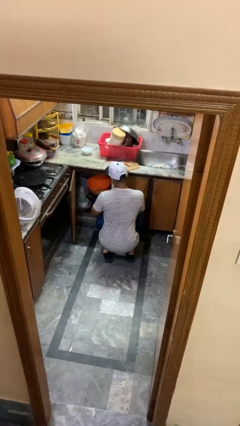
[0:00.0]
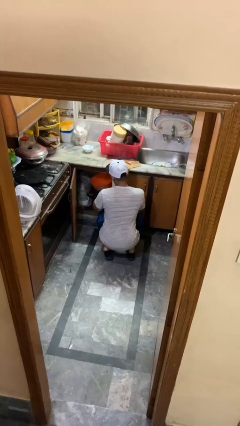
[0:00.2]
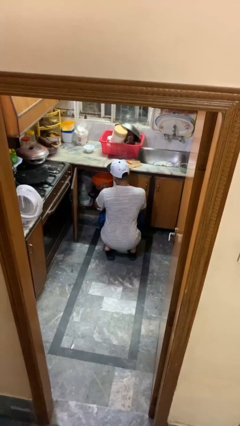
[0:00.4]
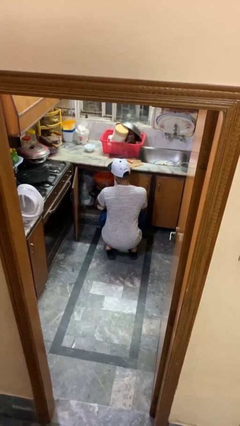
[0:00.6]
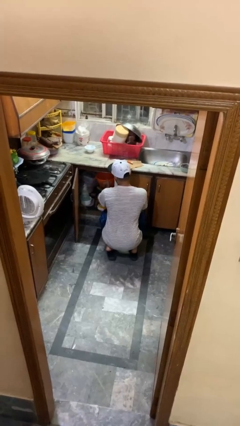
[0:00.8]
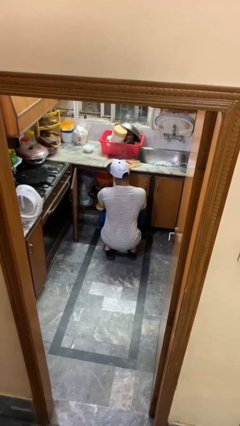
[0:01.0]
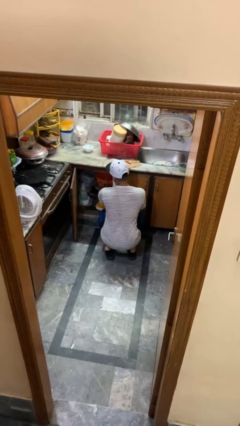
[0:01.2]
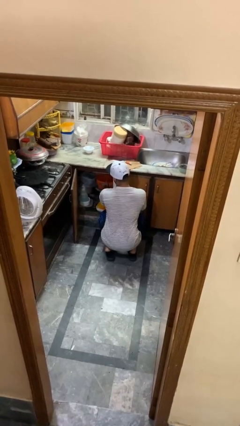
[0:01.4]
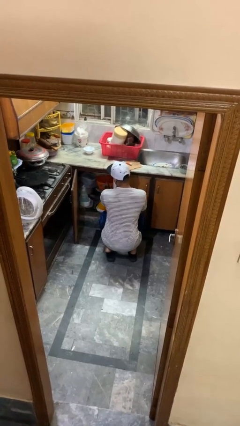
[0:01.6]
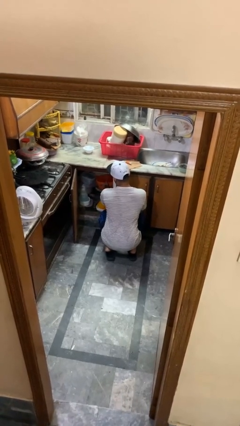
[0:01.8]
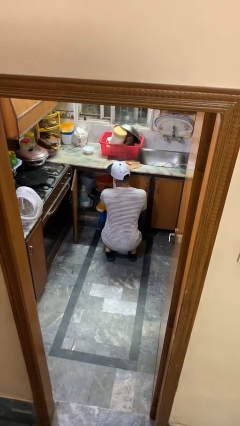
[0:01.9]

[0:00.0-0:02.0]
person puts object into kitchen drawer

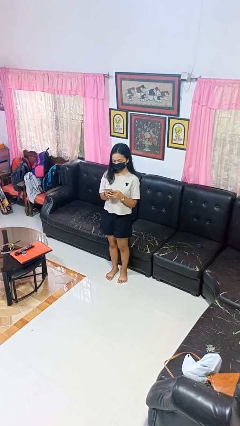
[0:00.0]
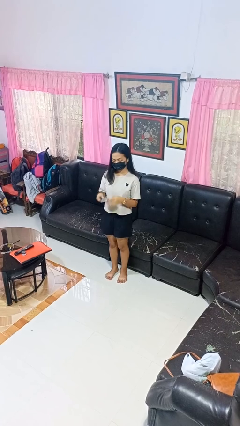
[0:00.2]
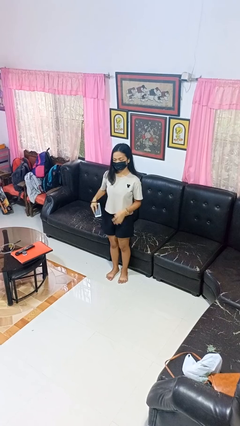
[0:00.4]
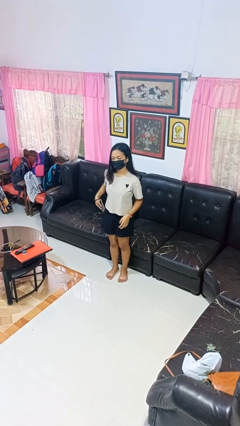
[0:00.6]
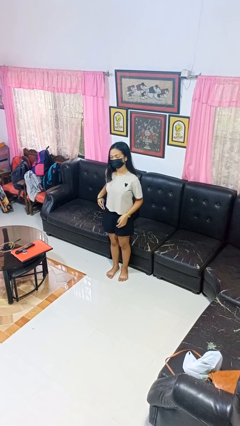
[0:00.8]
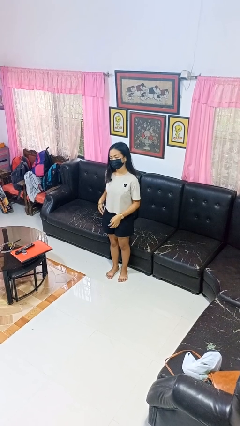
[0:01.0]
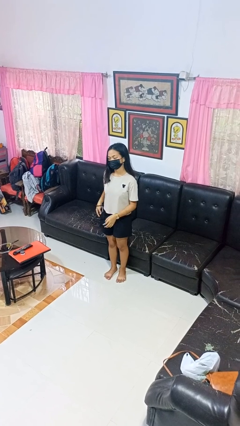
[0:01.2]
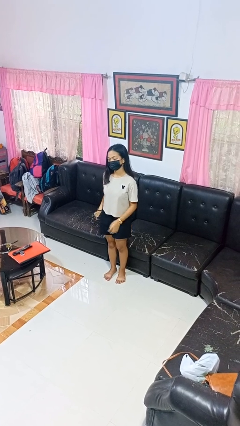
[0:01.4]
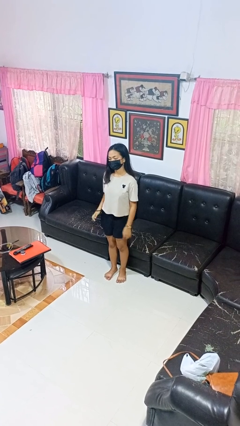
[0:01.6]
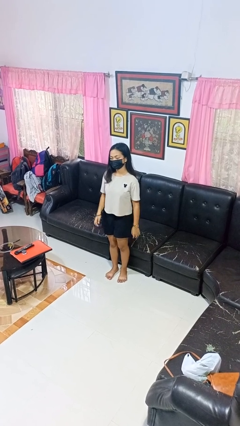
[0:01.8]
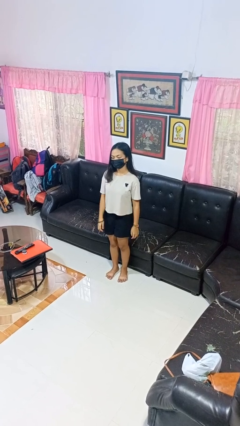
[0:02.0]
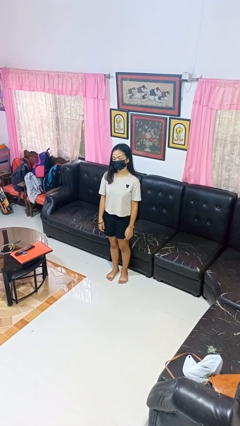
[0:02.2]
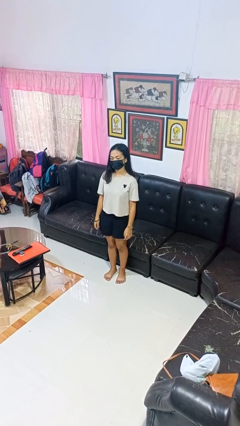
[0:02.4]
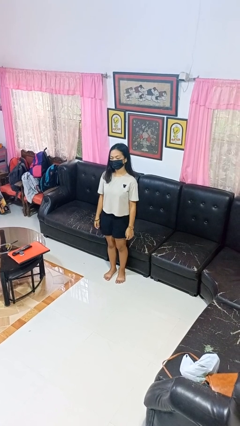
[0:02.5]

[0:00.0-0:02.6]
person puts phone into pocket

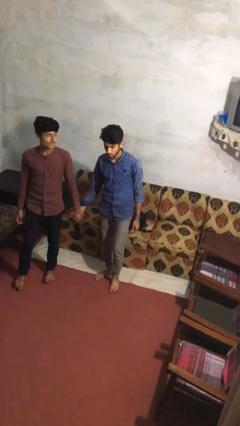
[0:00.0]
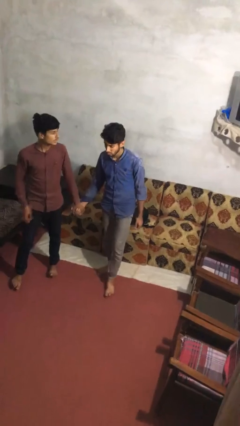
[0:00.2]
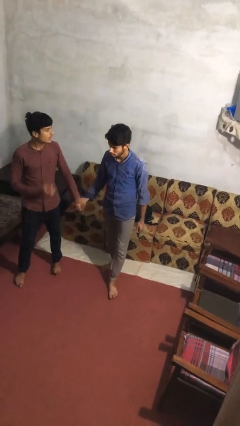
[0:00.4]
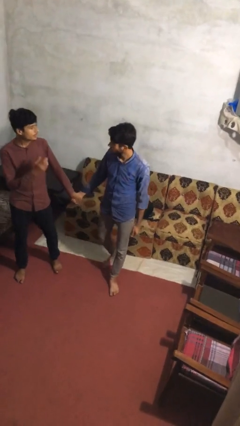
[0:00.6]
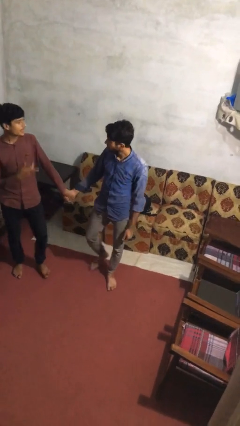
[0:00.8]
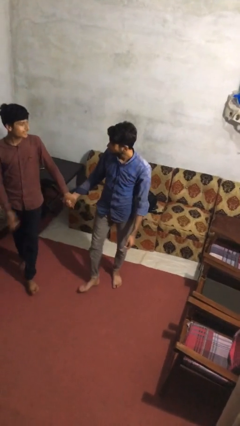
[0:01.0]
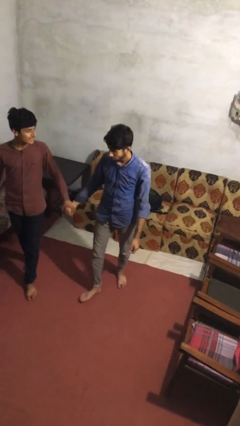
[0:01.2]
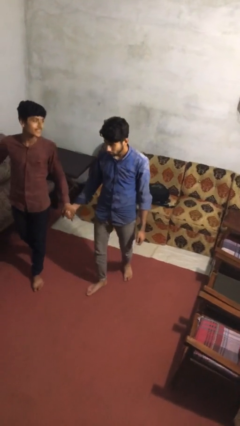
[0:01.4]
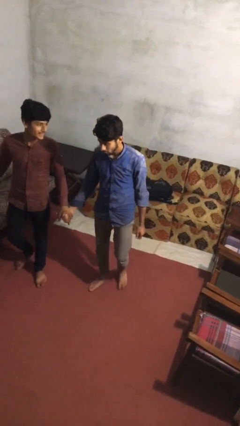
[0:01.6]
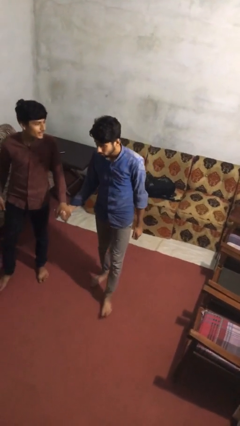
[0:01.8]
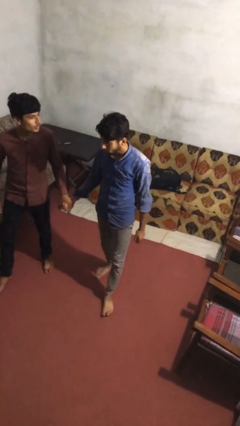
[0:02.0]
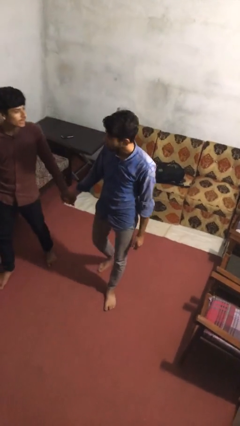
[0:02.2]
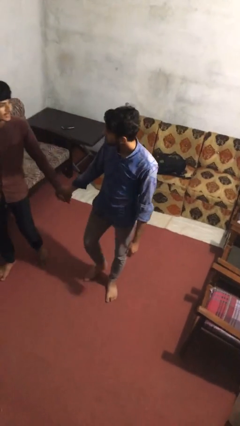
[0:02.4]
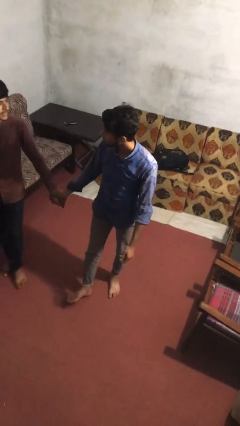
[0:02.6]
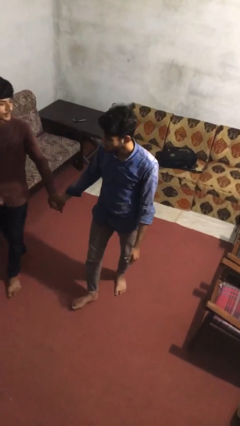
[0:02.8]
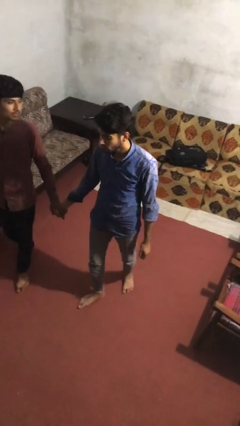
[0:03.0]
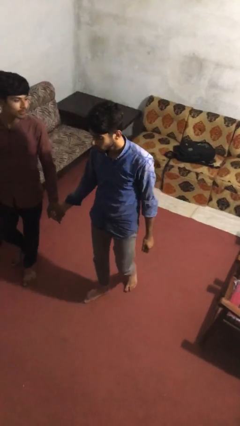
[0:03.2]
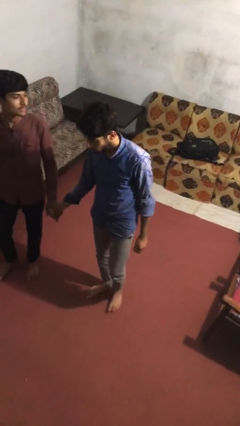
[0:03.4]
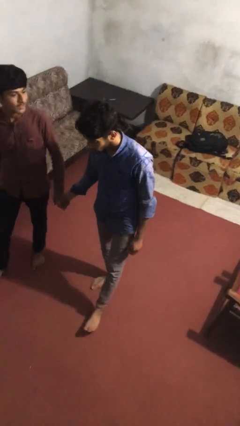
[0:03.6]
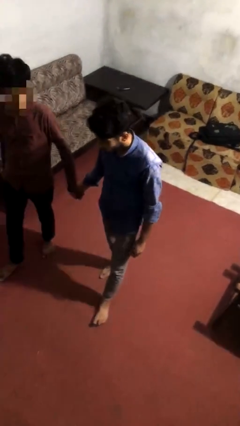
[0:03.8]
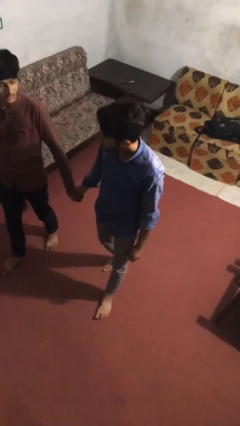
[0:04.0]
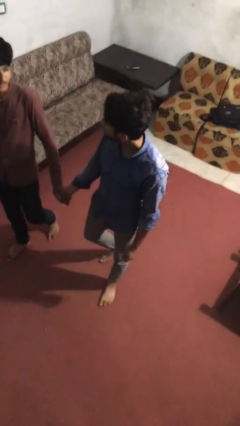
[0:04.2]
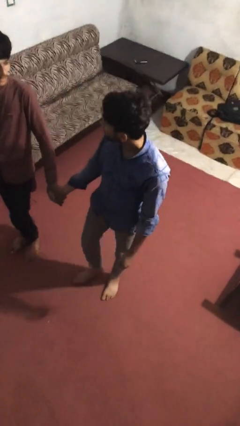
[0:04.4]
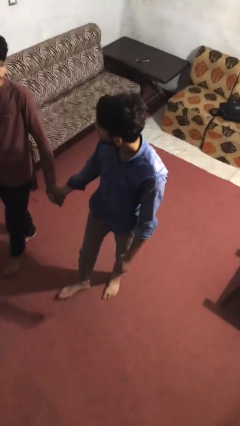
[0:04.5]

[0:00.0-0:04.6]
person holds hand

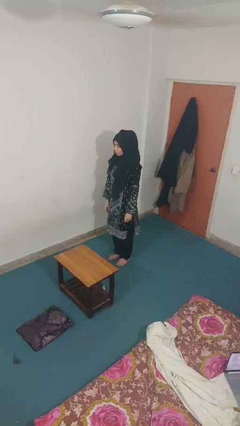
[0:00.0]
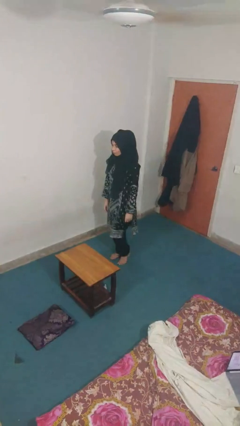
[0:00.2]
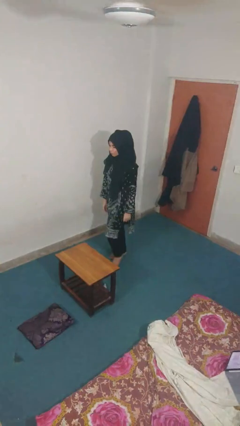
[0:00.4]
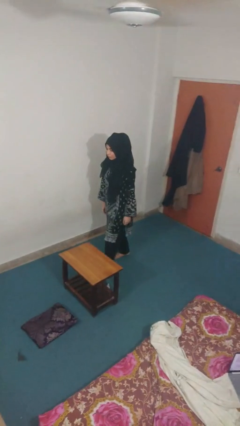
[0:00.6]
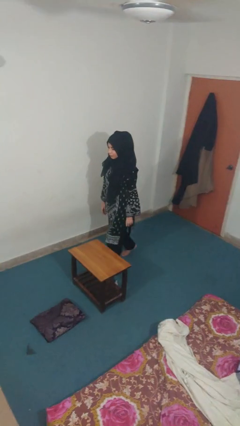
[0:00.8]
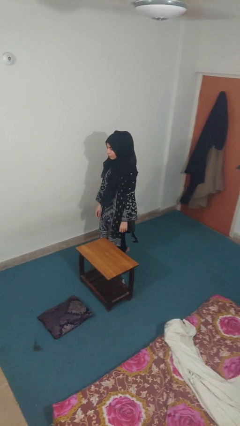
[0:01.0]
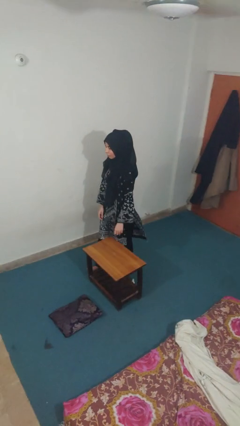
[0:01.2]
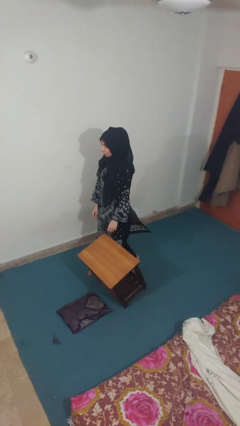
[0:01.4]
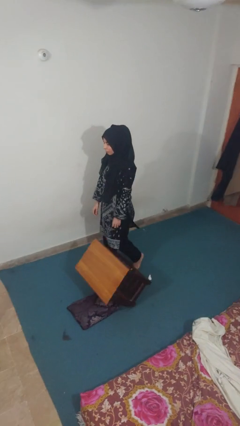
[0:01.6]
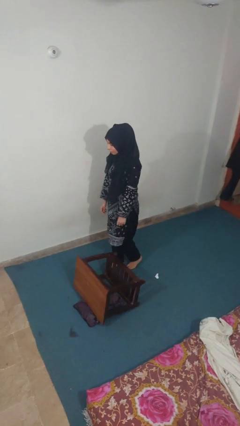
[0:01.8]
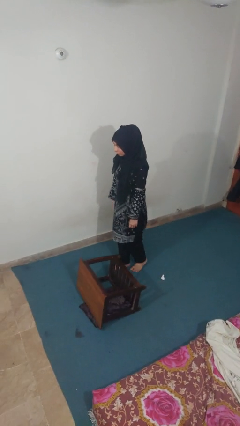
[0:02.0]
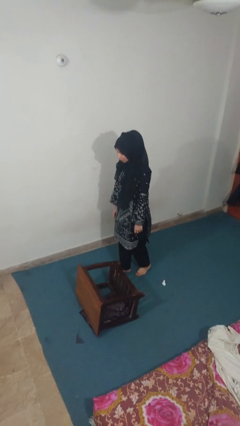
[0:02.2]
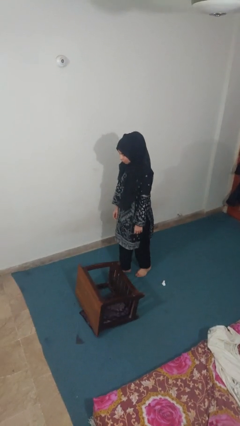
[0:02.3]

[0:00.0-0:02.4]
person knocks over furniture

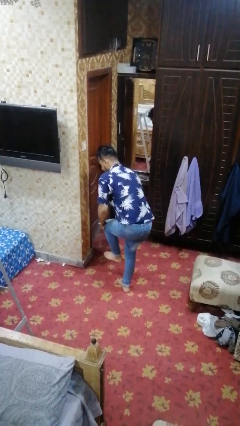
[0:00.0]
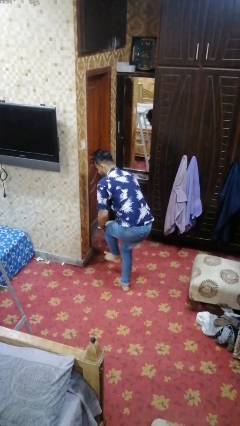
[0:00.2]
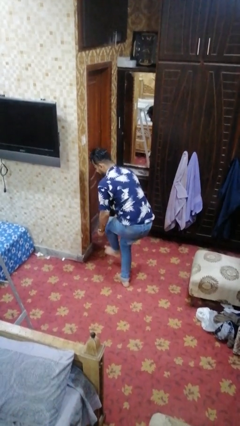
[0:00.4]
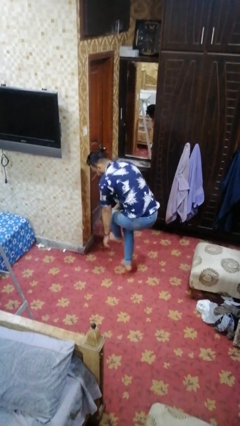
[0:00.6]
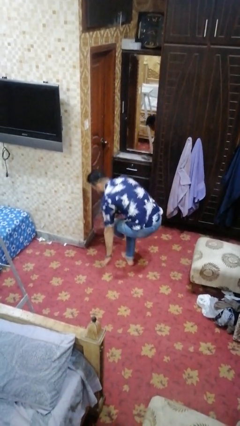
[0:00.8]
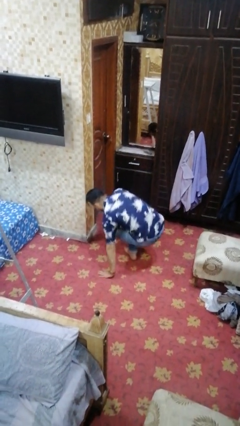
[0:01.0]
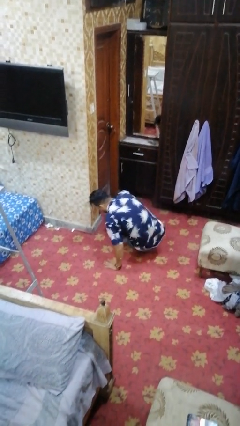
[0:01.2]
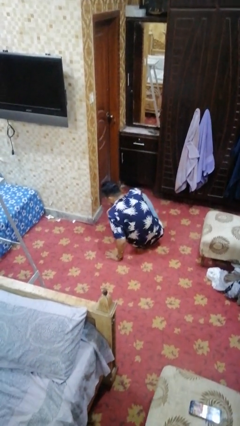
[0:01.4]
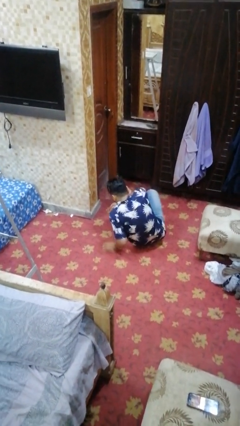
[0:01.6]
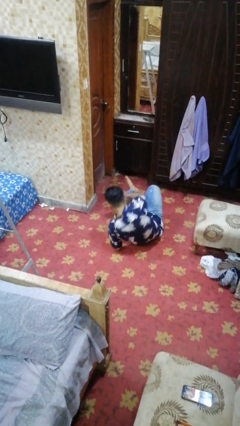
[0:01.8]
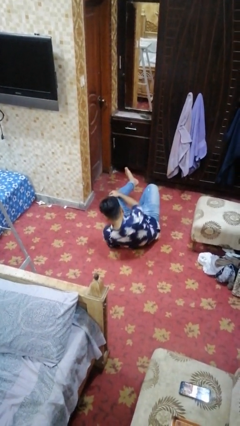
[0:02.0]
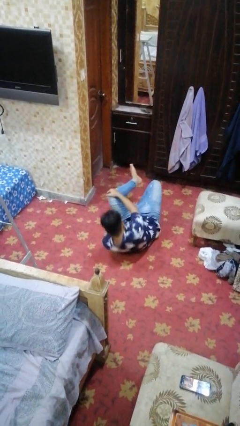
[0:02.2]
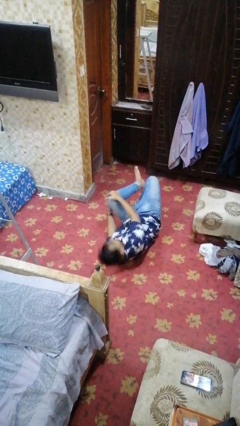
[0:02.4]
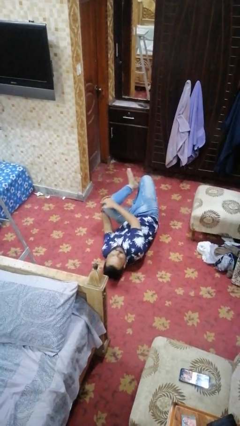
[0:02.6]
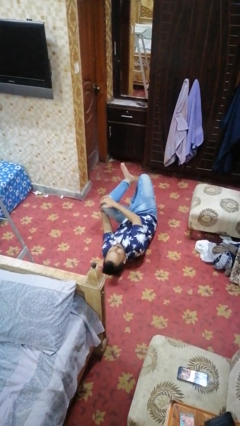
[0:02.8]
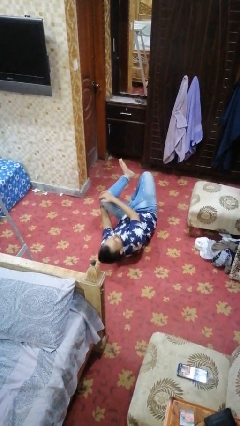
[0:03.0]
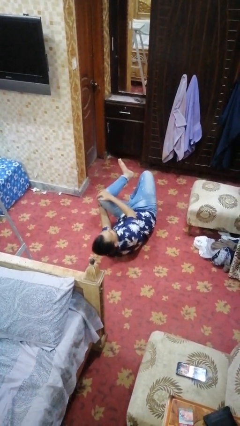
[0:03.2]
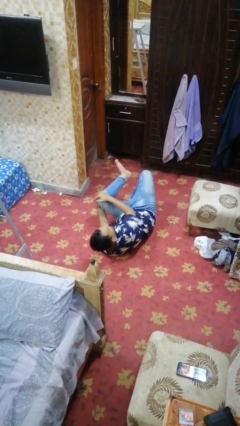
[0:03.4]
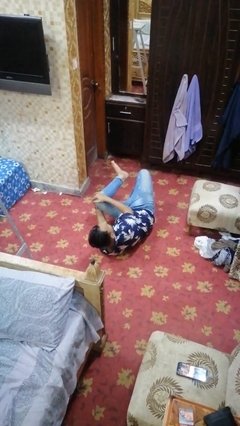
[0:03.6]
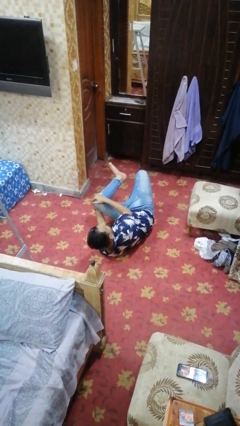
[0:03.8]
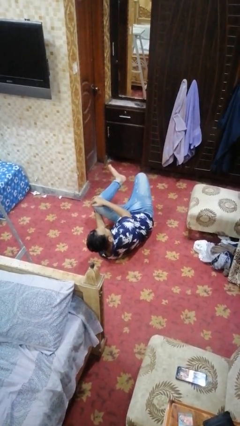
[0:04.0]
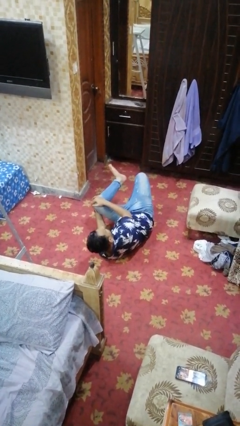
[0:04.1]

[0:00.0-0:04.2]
person lies down on floor

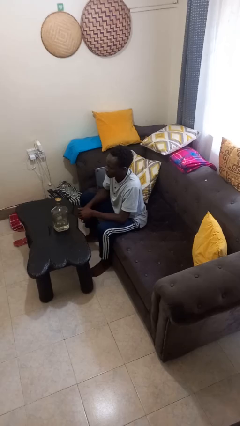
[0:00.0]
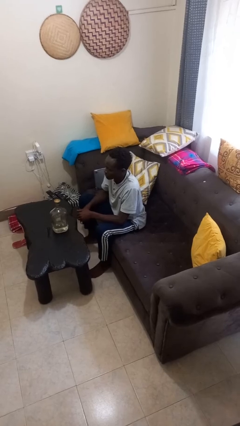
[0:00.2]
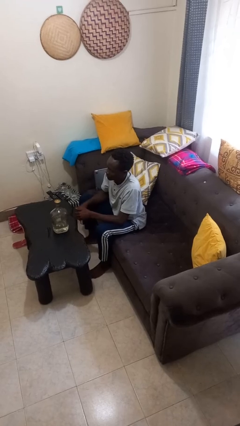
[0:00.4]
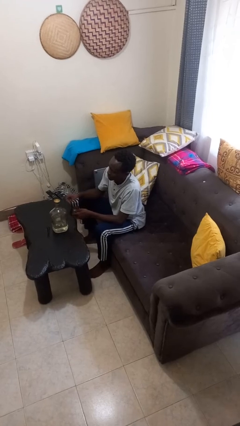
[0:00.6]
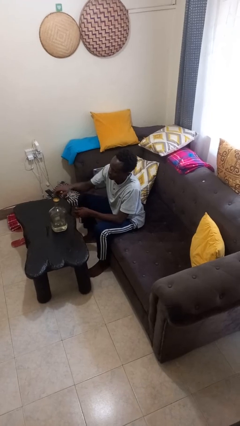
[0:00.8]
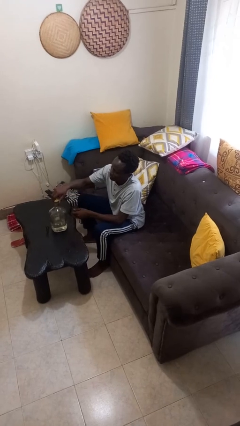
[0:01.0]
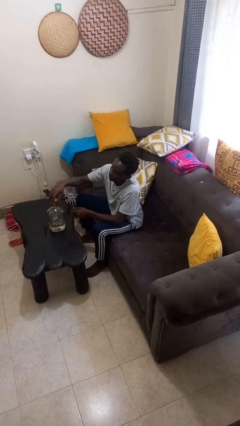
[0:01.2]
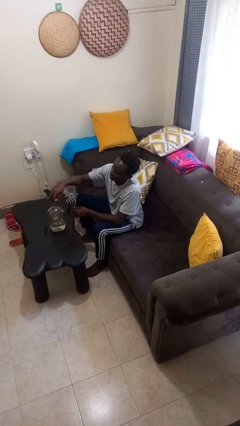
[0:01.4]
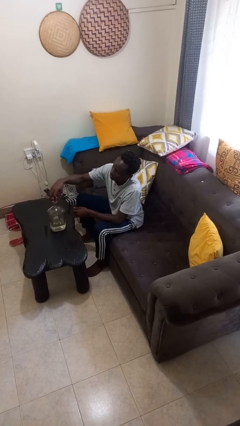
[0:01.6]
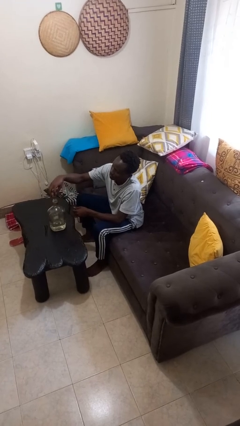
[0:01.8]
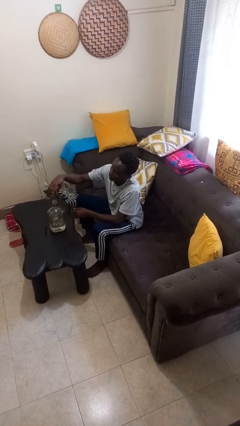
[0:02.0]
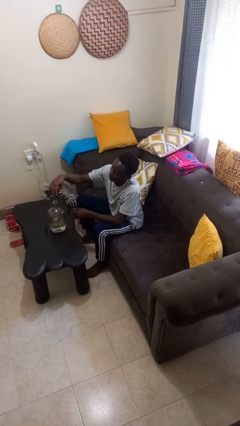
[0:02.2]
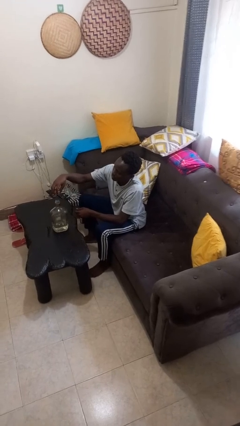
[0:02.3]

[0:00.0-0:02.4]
person unscrews lid from bottle
